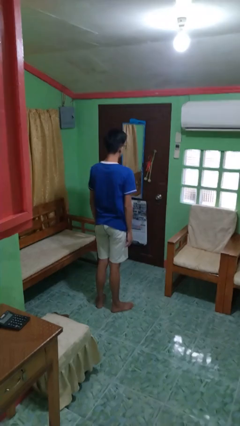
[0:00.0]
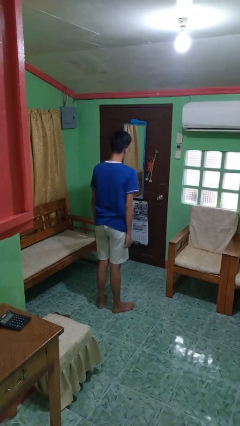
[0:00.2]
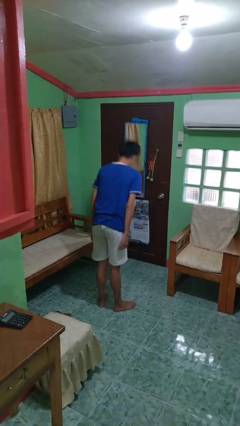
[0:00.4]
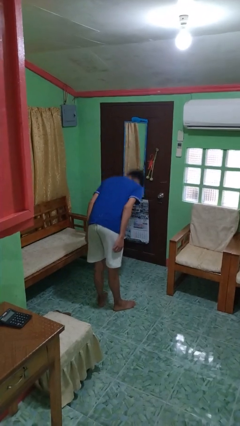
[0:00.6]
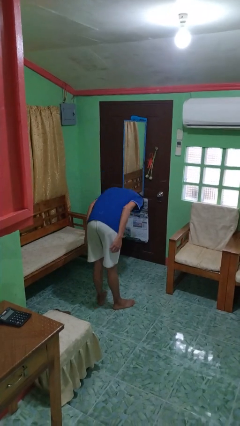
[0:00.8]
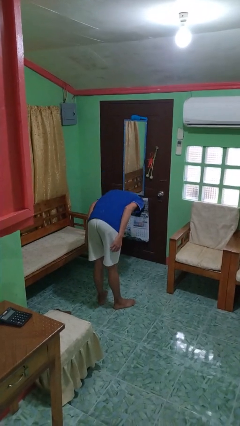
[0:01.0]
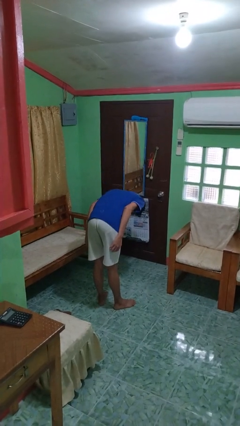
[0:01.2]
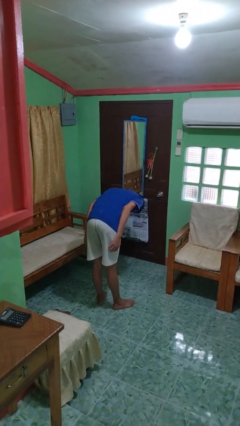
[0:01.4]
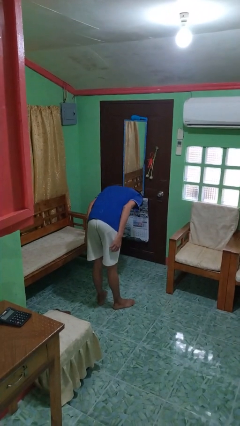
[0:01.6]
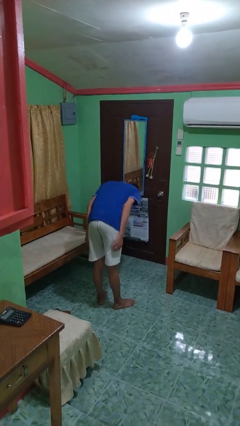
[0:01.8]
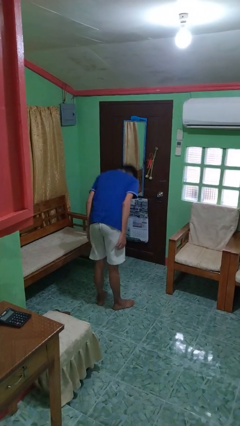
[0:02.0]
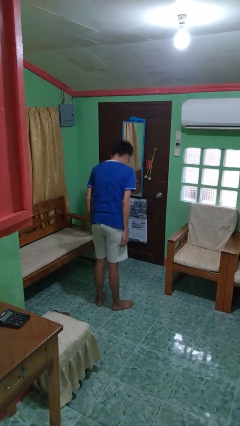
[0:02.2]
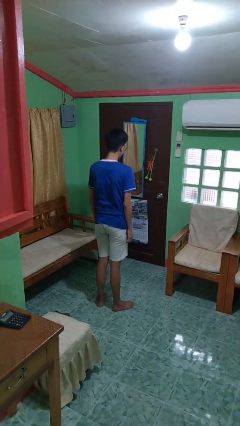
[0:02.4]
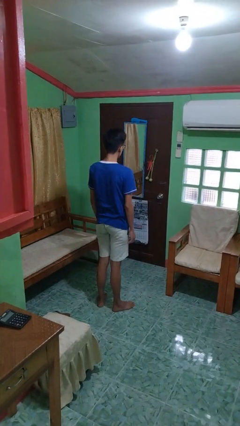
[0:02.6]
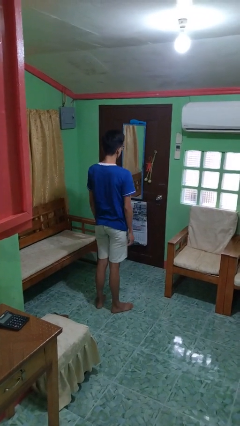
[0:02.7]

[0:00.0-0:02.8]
person bows

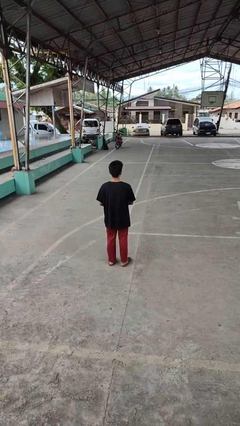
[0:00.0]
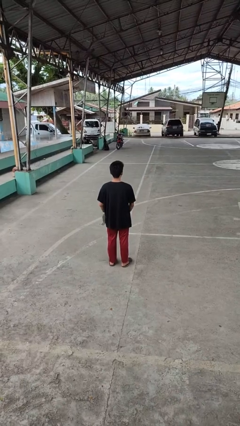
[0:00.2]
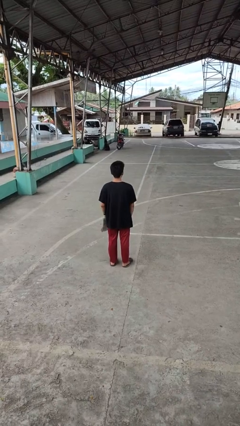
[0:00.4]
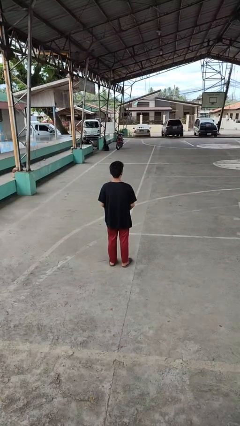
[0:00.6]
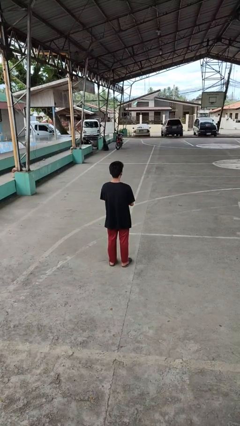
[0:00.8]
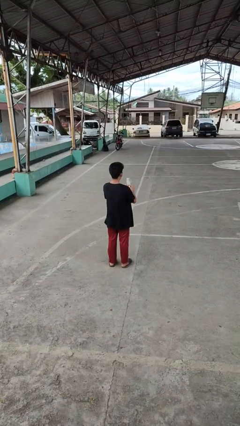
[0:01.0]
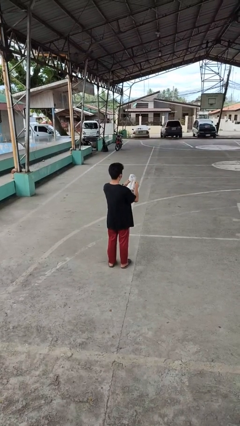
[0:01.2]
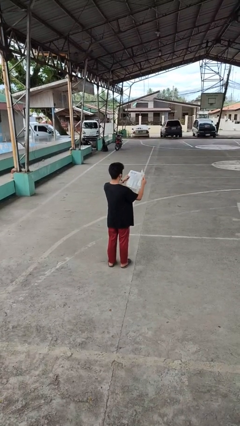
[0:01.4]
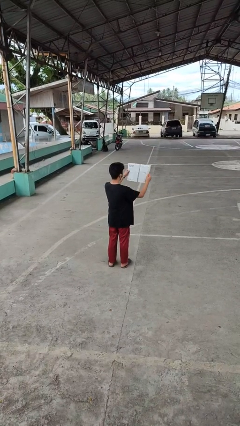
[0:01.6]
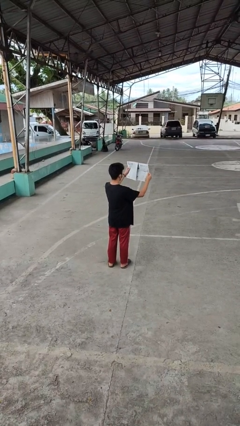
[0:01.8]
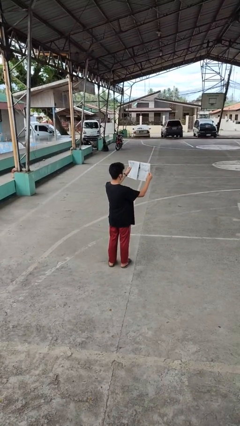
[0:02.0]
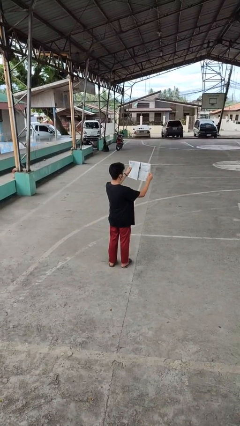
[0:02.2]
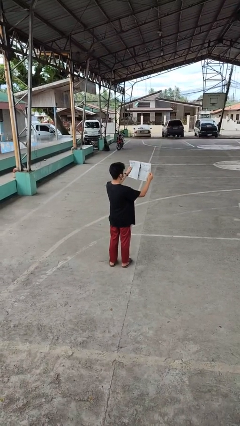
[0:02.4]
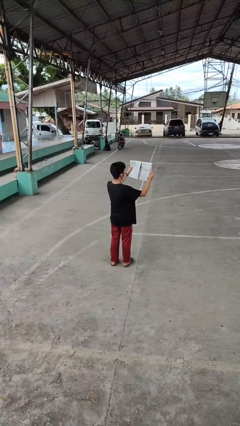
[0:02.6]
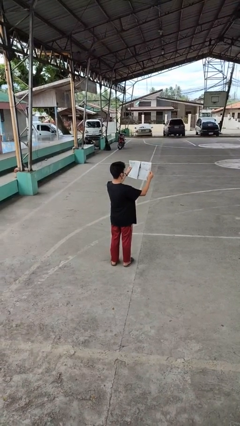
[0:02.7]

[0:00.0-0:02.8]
person reads newspaper

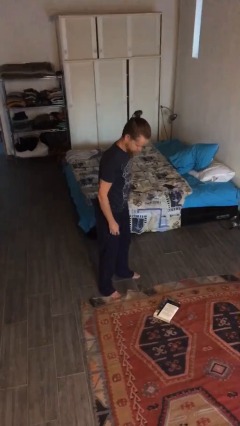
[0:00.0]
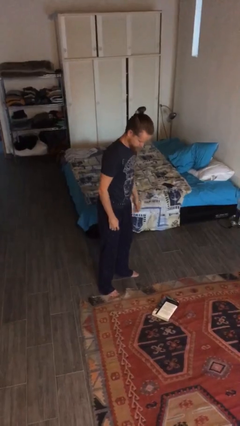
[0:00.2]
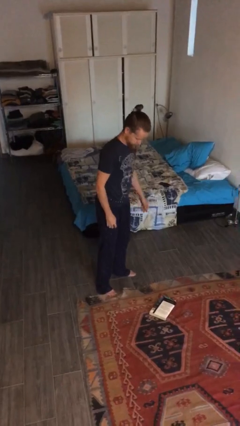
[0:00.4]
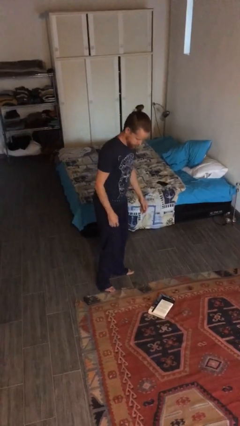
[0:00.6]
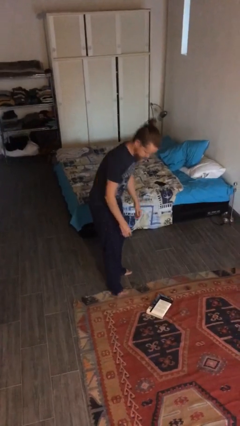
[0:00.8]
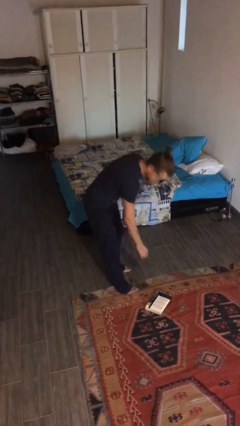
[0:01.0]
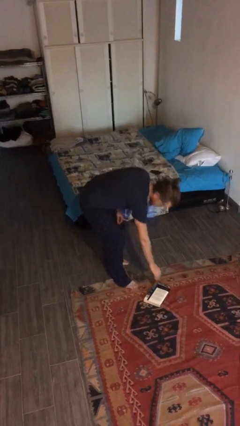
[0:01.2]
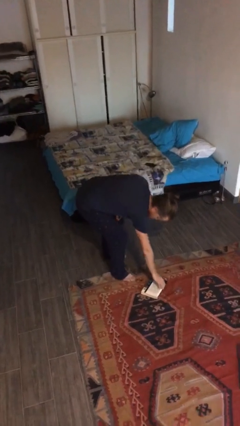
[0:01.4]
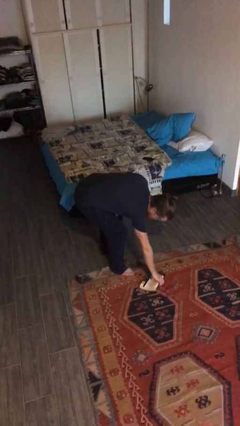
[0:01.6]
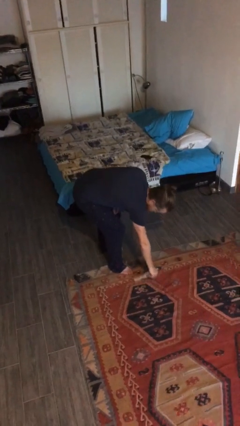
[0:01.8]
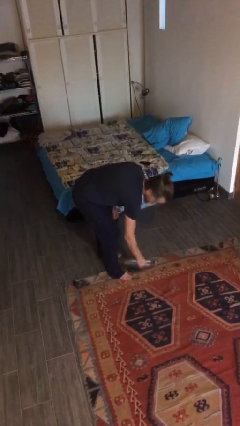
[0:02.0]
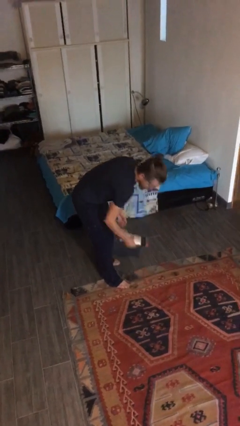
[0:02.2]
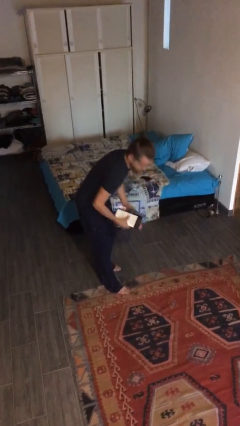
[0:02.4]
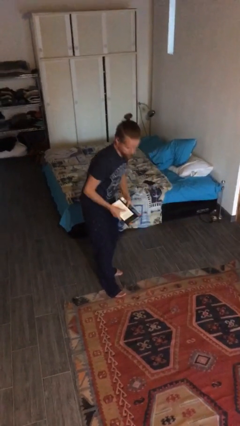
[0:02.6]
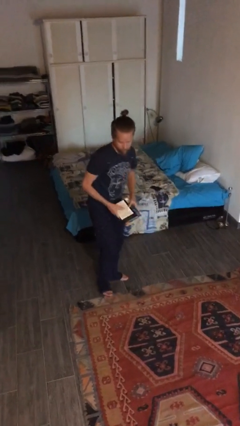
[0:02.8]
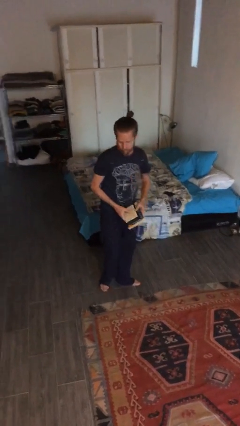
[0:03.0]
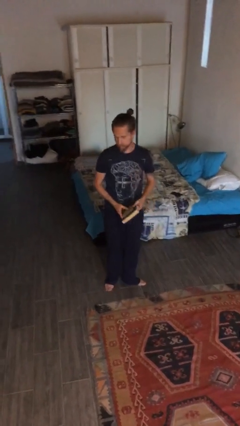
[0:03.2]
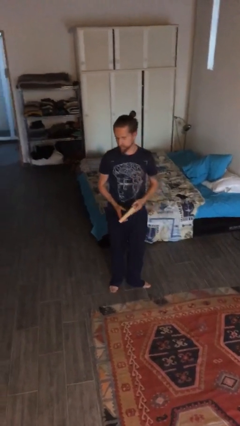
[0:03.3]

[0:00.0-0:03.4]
person picks up object from floor

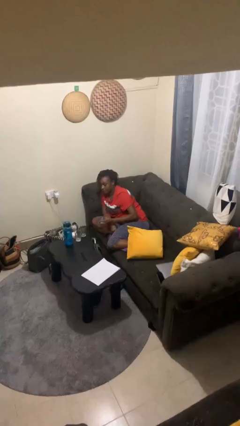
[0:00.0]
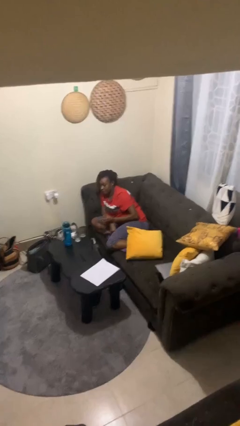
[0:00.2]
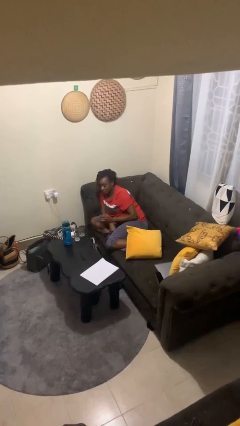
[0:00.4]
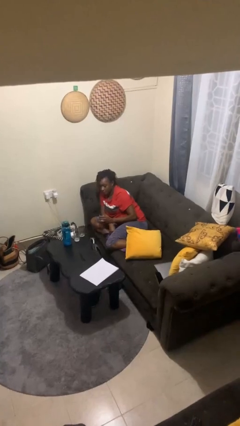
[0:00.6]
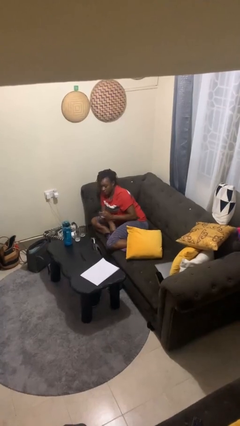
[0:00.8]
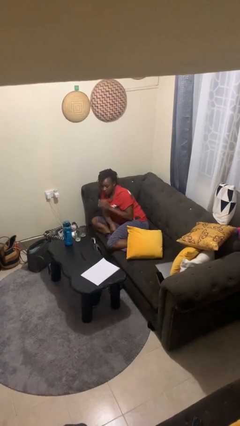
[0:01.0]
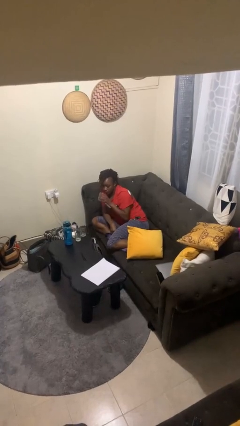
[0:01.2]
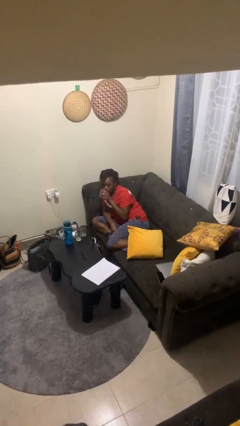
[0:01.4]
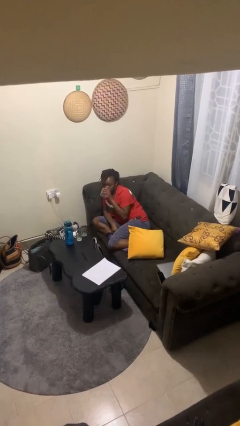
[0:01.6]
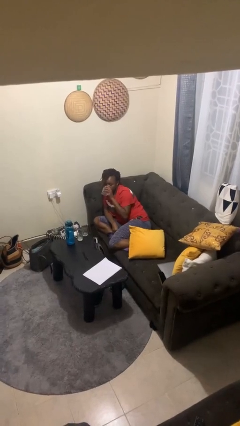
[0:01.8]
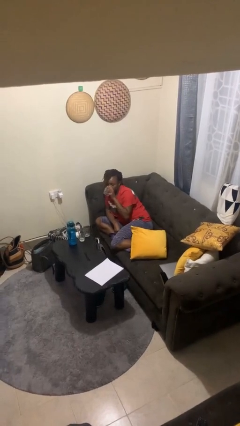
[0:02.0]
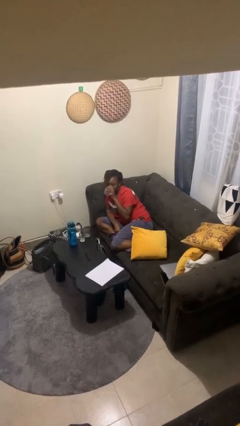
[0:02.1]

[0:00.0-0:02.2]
person drinks from shotglass

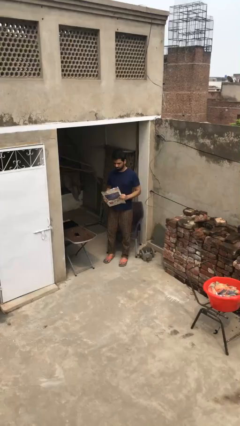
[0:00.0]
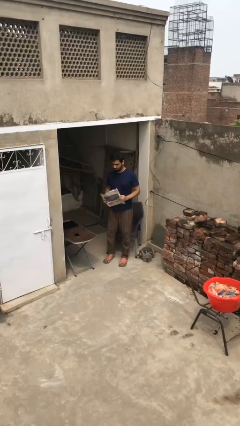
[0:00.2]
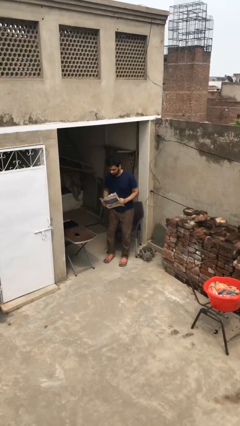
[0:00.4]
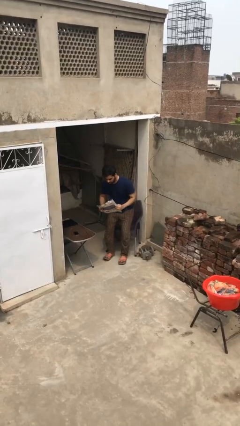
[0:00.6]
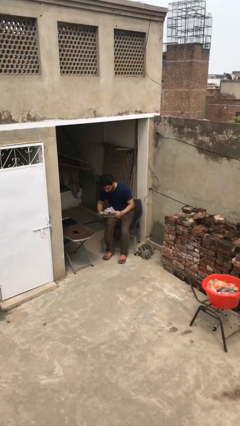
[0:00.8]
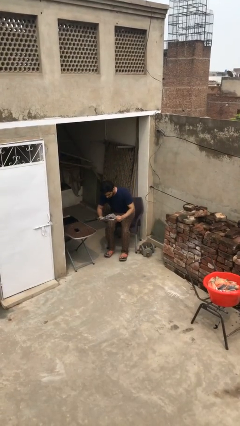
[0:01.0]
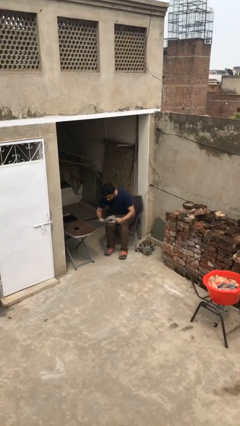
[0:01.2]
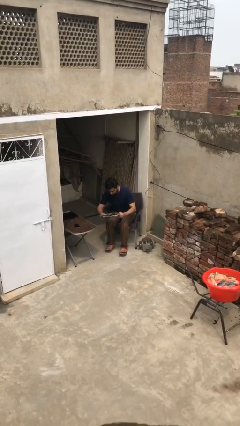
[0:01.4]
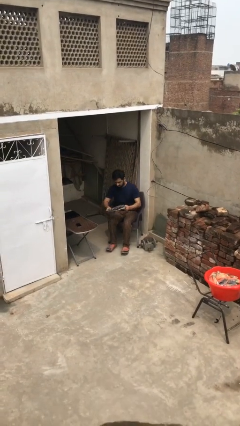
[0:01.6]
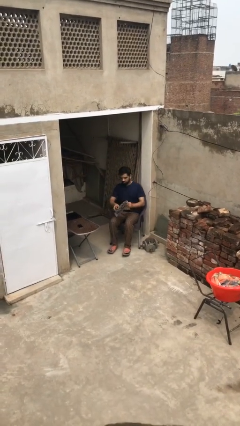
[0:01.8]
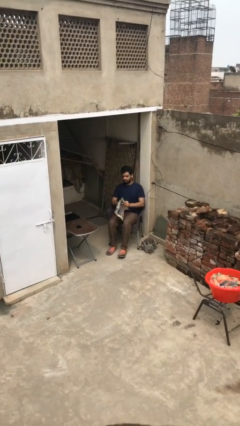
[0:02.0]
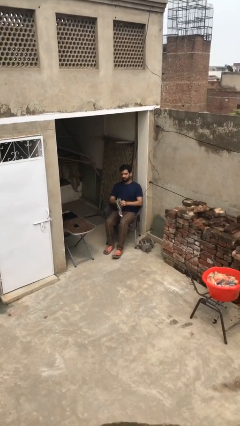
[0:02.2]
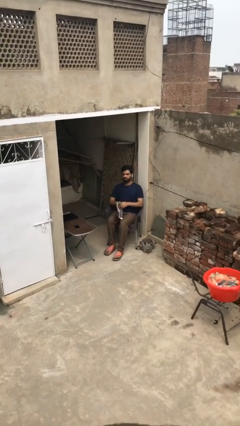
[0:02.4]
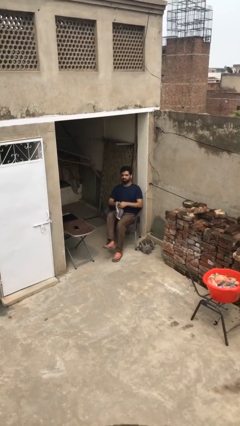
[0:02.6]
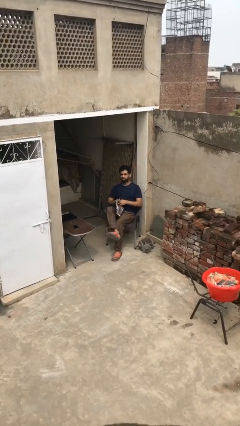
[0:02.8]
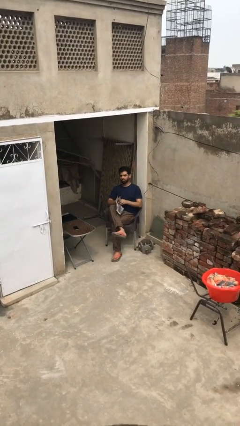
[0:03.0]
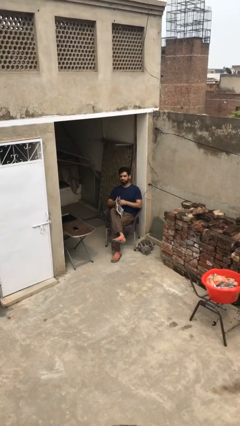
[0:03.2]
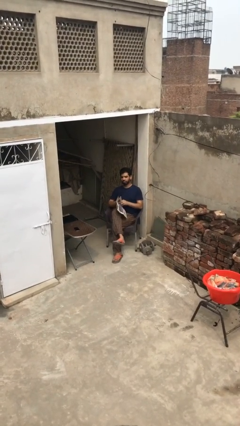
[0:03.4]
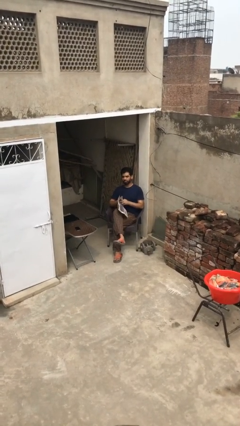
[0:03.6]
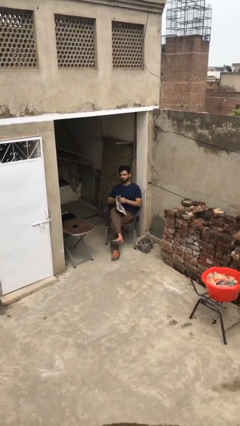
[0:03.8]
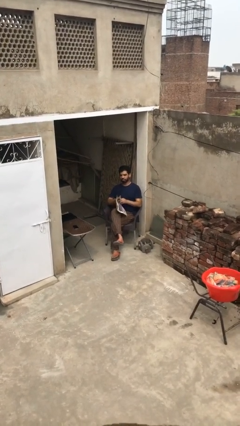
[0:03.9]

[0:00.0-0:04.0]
person sits down

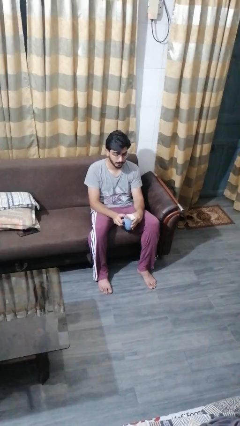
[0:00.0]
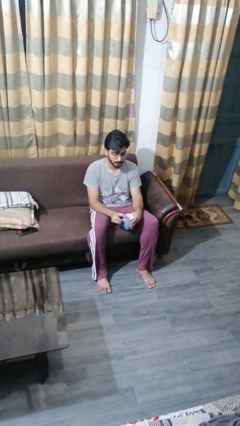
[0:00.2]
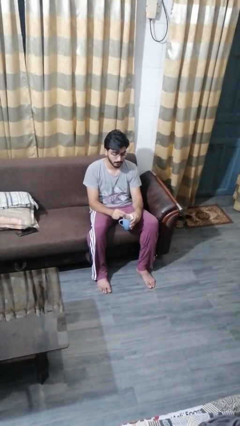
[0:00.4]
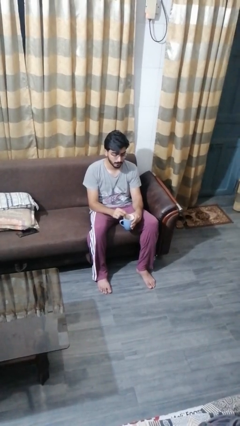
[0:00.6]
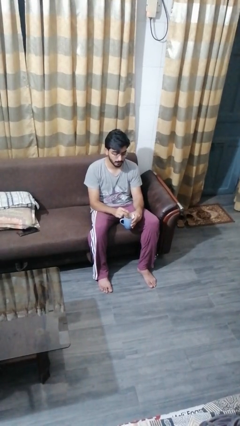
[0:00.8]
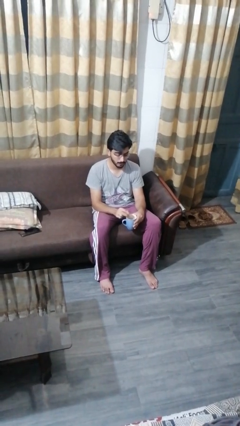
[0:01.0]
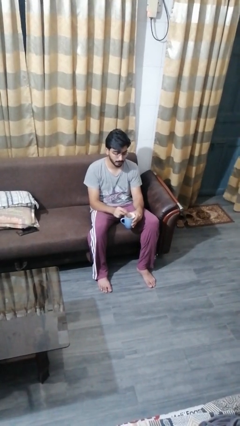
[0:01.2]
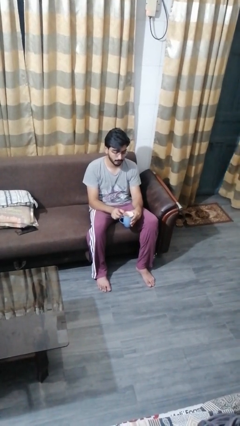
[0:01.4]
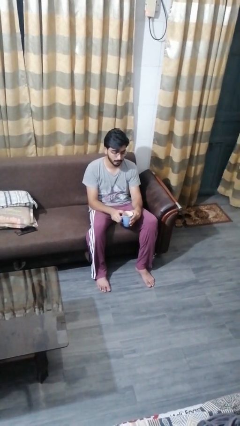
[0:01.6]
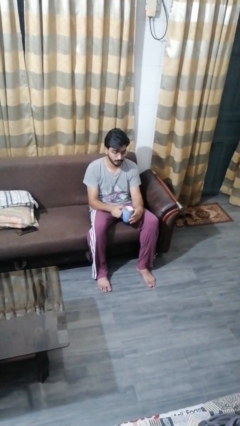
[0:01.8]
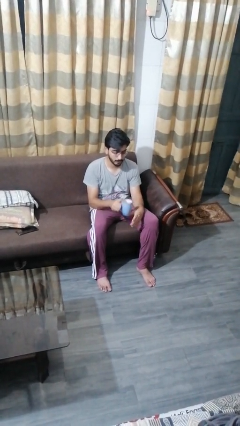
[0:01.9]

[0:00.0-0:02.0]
person stirs mug
